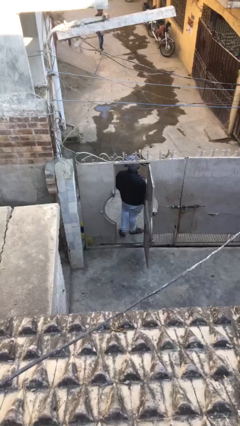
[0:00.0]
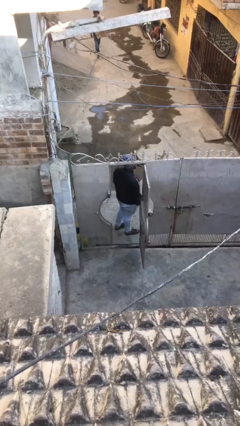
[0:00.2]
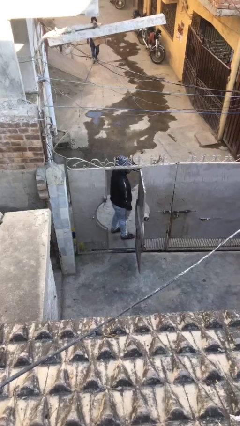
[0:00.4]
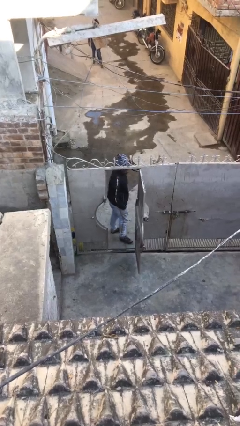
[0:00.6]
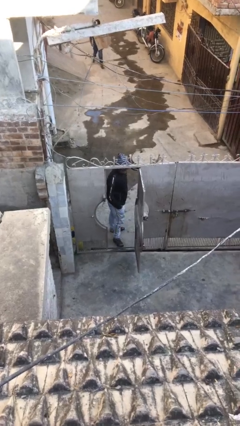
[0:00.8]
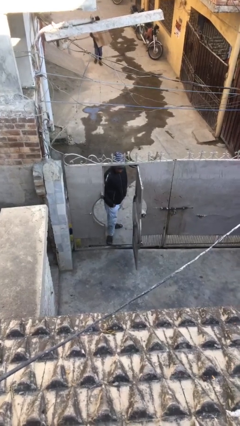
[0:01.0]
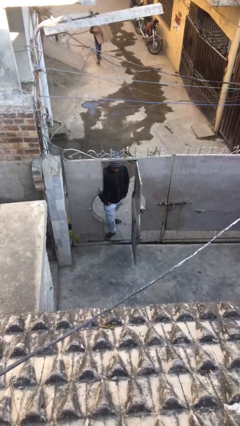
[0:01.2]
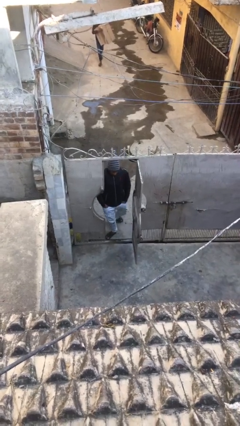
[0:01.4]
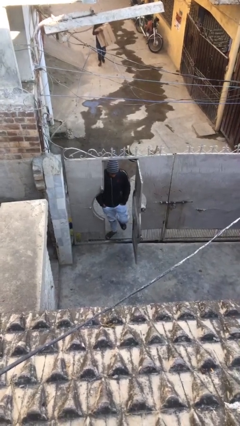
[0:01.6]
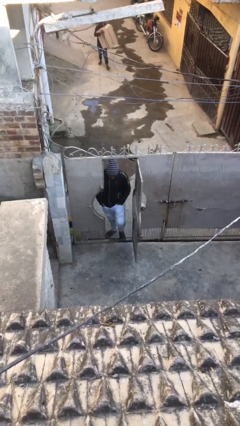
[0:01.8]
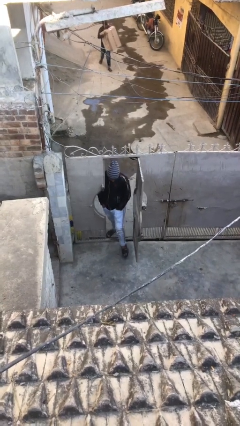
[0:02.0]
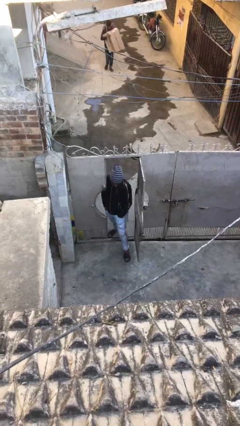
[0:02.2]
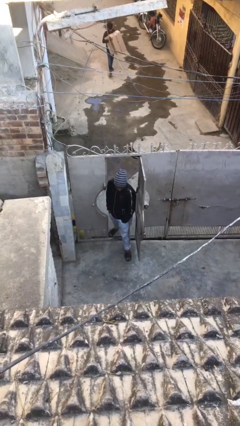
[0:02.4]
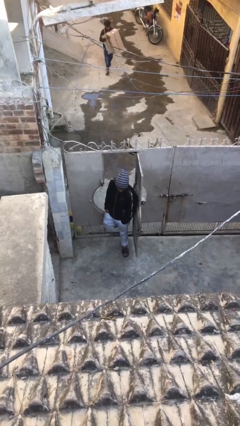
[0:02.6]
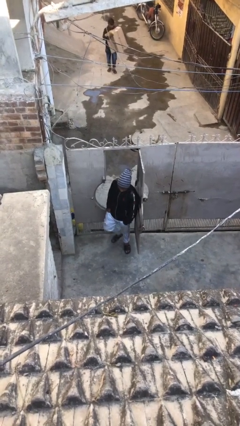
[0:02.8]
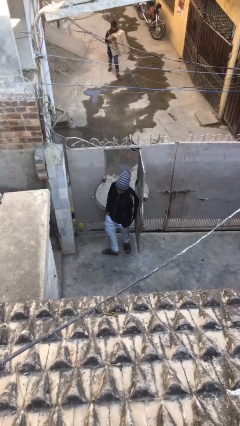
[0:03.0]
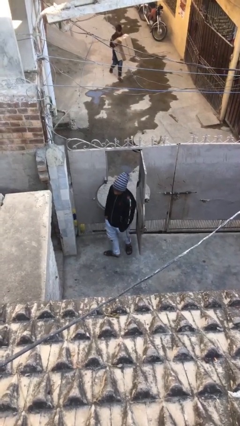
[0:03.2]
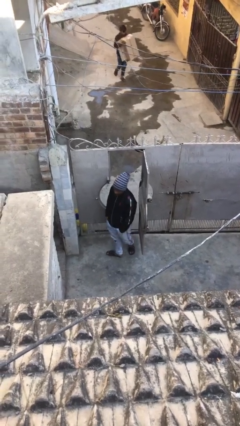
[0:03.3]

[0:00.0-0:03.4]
person enters scene through structure

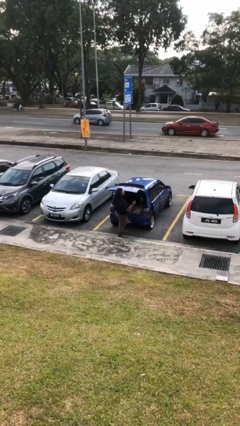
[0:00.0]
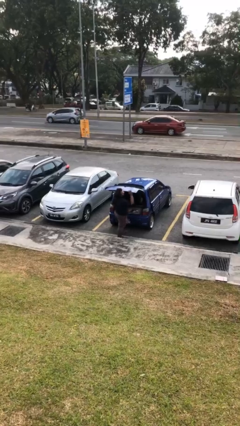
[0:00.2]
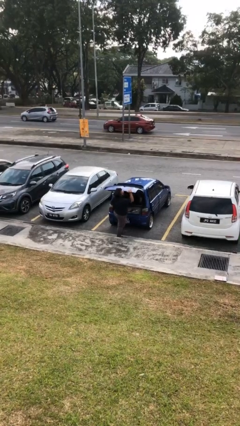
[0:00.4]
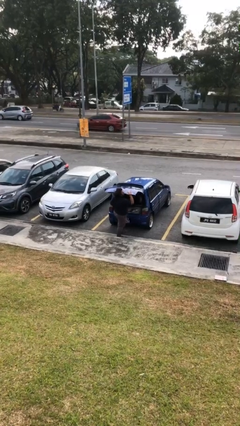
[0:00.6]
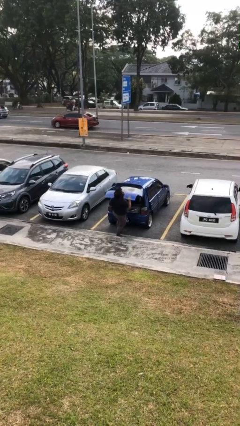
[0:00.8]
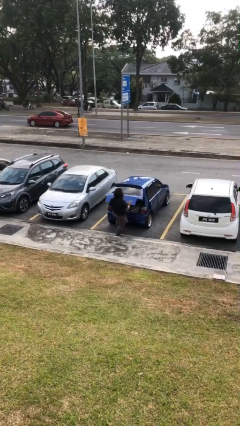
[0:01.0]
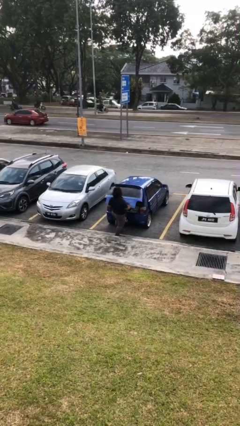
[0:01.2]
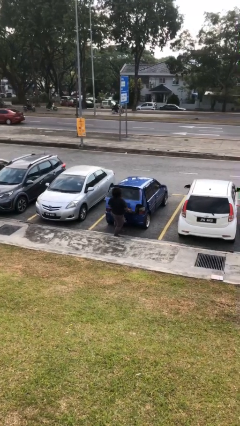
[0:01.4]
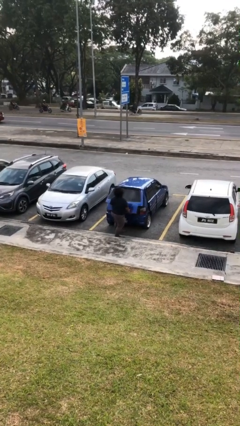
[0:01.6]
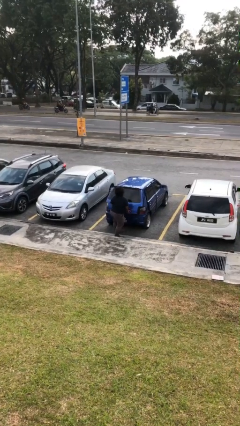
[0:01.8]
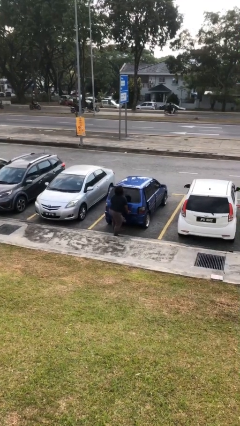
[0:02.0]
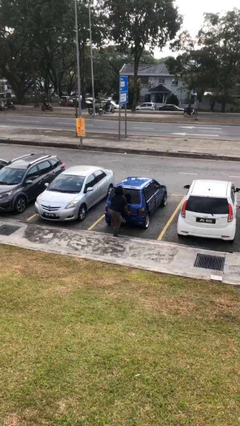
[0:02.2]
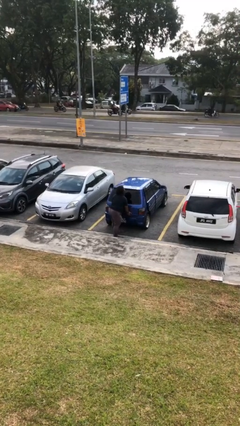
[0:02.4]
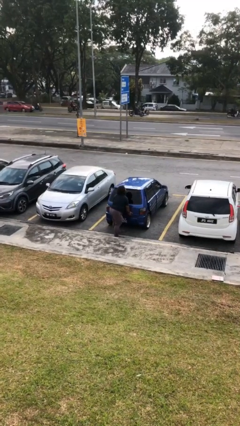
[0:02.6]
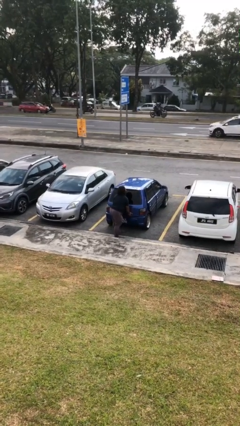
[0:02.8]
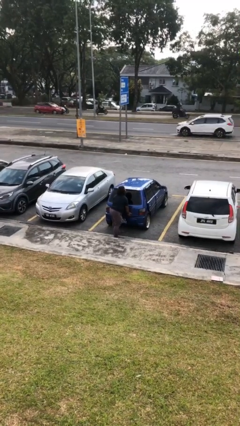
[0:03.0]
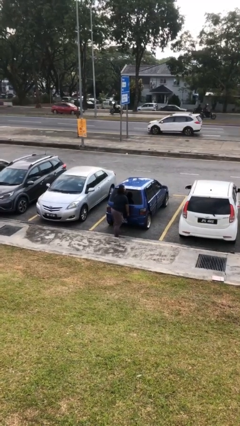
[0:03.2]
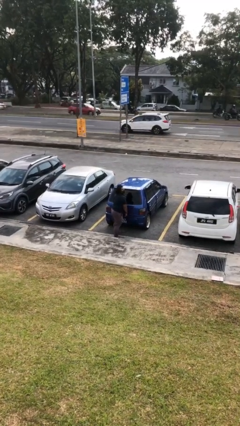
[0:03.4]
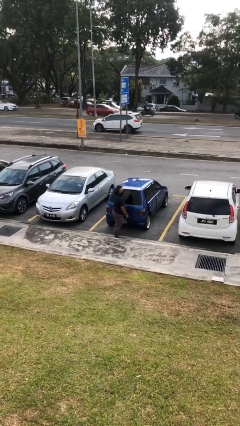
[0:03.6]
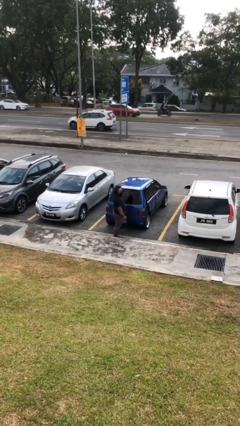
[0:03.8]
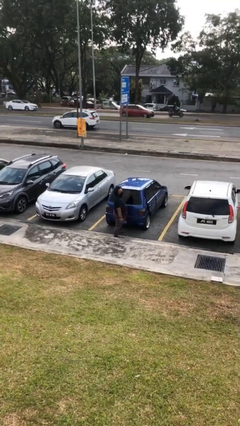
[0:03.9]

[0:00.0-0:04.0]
person closes car trunk

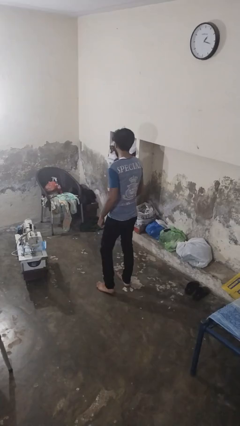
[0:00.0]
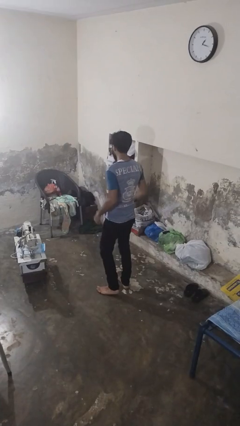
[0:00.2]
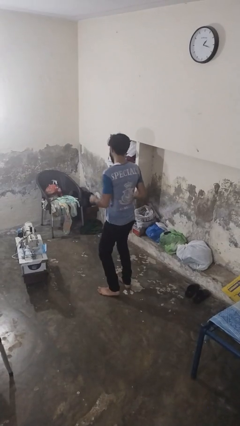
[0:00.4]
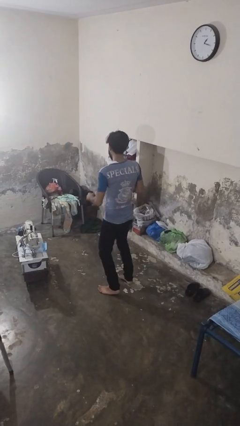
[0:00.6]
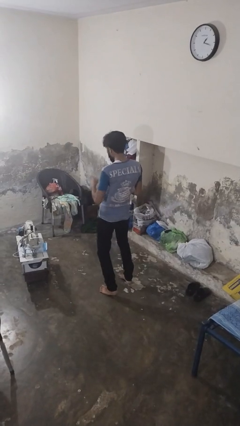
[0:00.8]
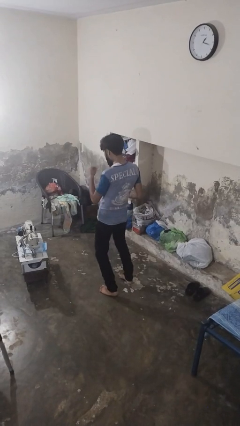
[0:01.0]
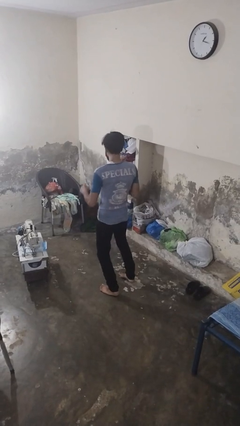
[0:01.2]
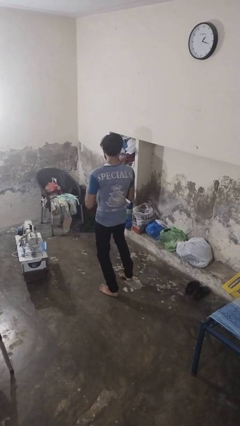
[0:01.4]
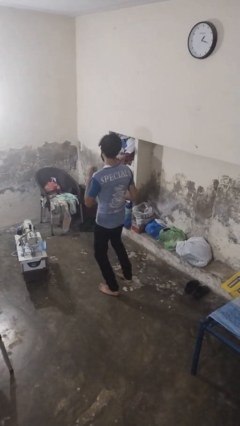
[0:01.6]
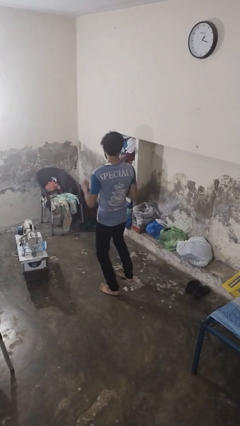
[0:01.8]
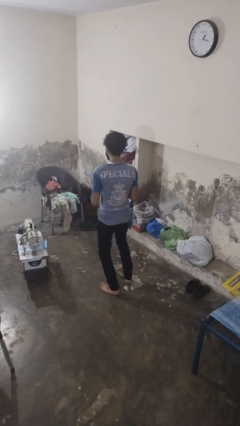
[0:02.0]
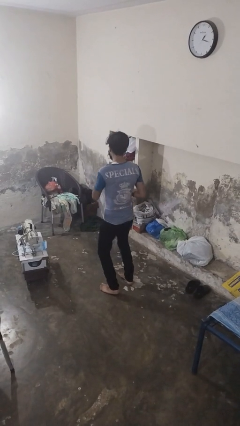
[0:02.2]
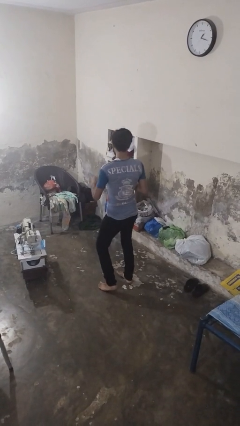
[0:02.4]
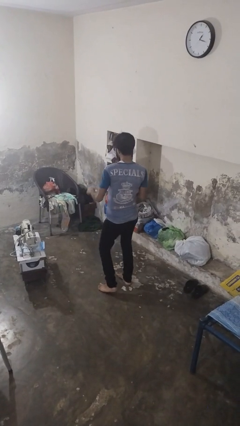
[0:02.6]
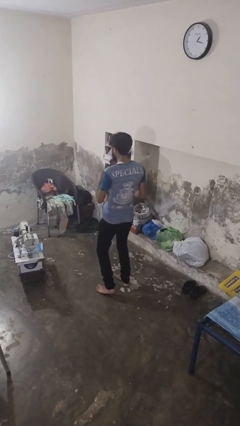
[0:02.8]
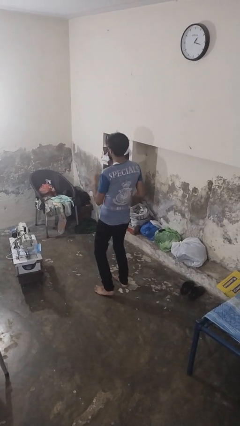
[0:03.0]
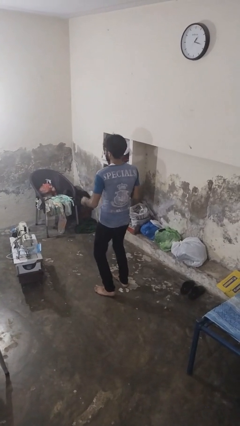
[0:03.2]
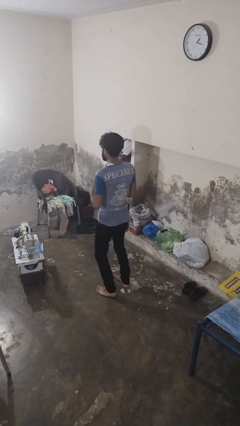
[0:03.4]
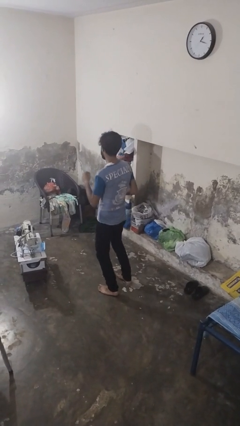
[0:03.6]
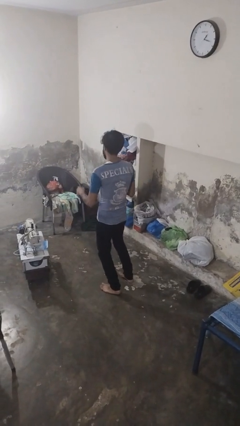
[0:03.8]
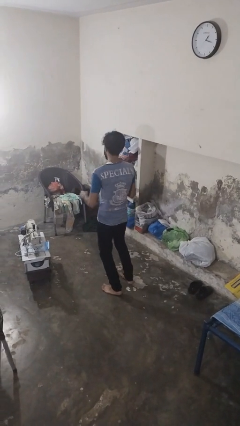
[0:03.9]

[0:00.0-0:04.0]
person dances in place

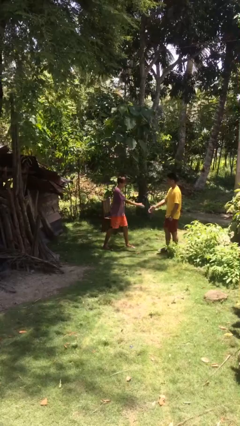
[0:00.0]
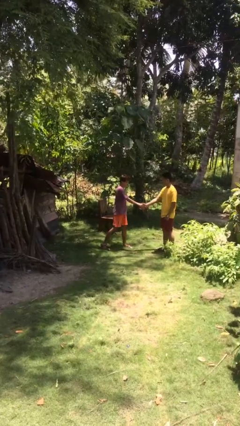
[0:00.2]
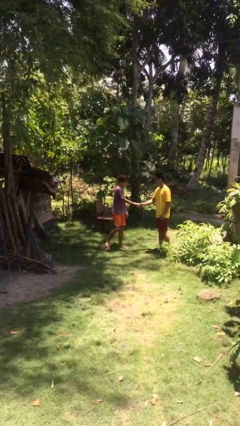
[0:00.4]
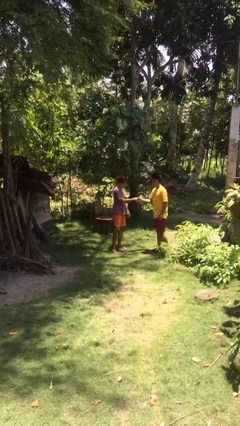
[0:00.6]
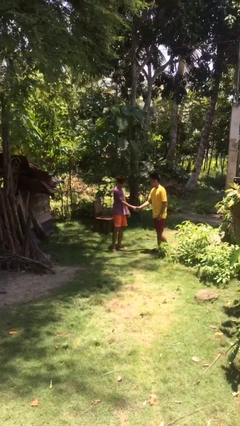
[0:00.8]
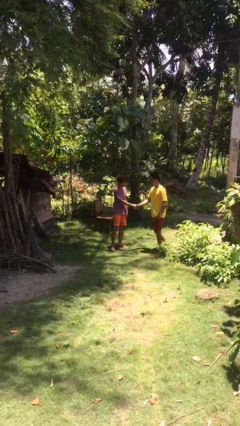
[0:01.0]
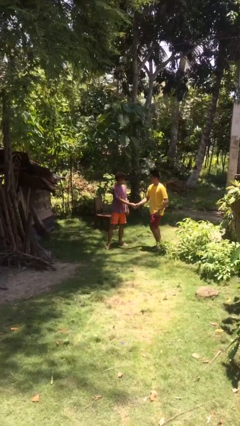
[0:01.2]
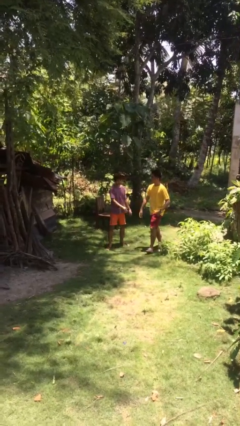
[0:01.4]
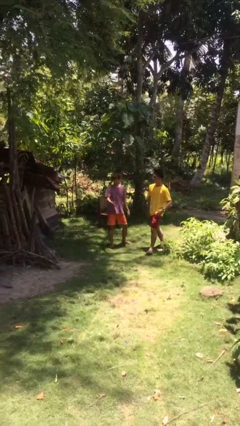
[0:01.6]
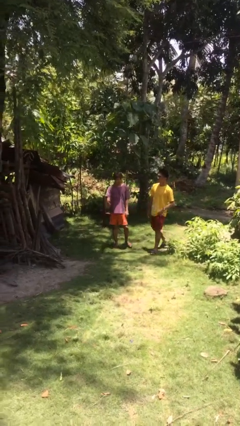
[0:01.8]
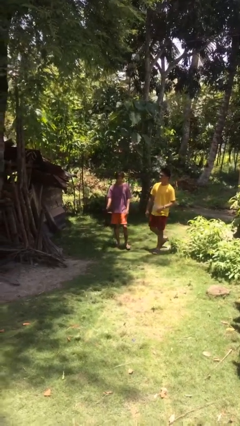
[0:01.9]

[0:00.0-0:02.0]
person shakes hand

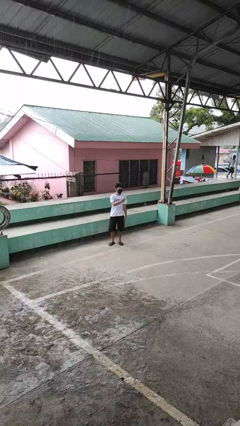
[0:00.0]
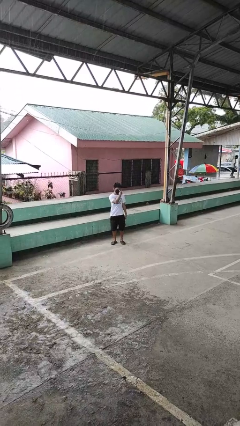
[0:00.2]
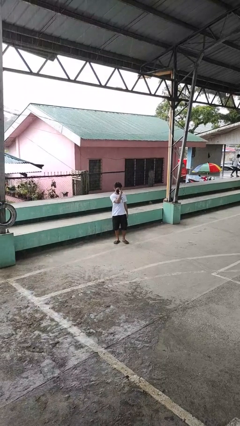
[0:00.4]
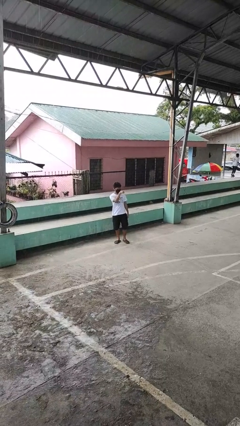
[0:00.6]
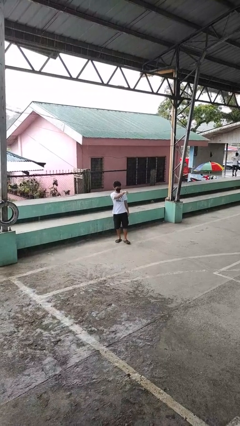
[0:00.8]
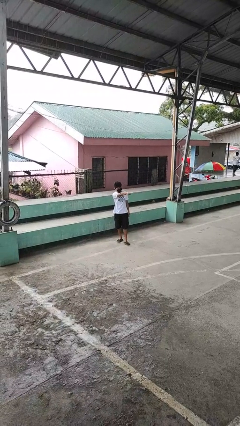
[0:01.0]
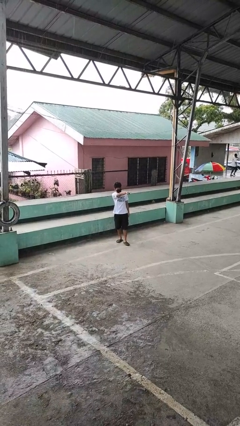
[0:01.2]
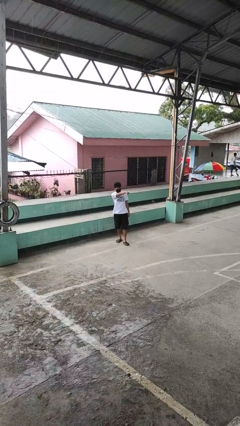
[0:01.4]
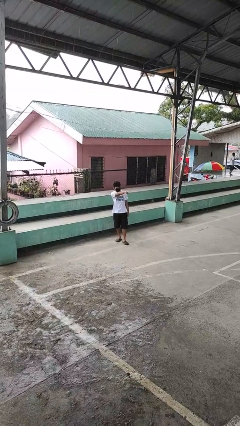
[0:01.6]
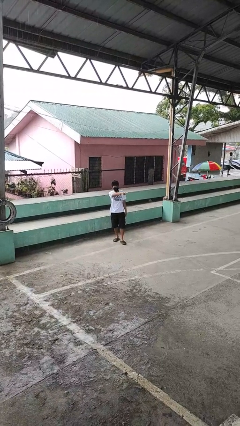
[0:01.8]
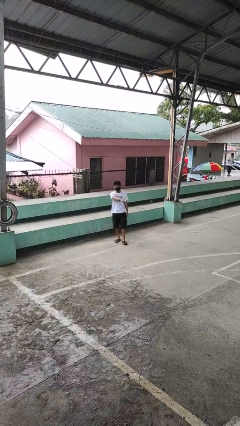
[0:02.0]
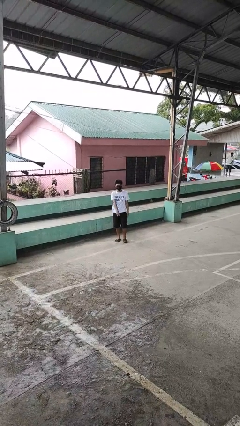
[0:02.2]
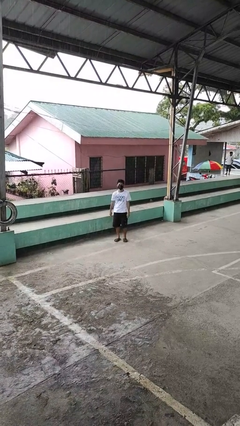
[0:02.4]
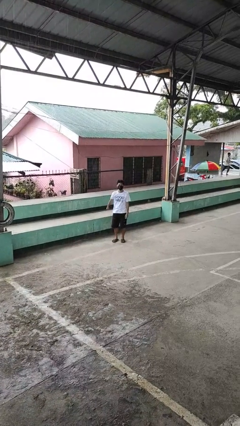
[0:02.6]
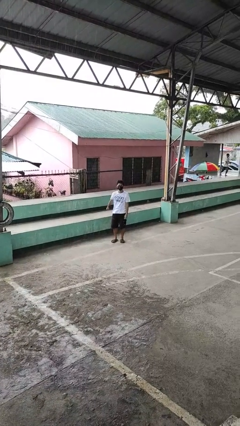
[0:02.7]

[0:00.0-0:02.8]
person gestures watch closely

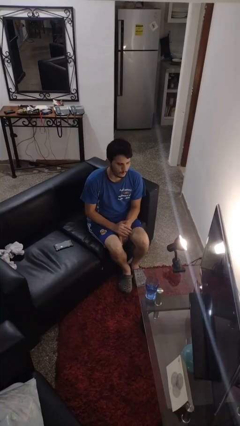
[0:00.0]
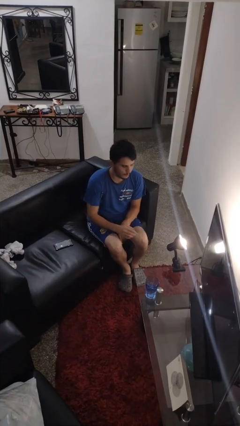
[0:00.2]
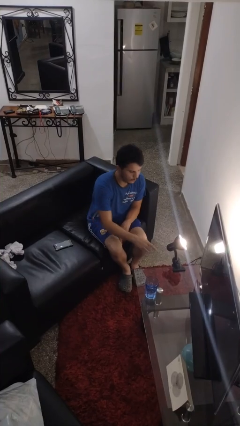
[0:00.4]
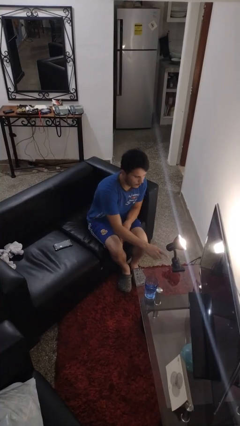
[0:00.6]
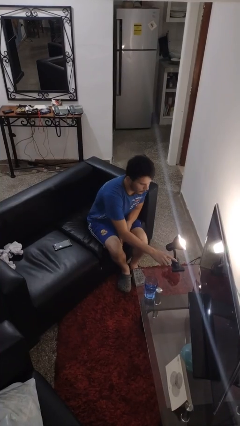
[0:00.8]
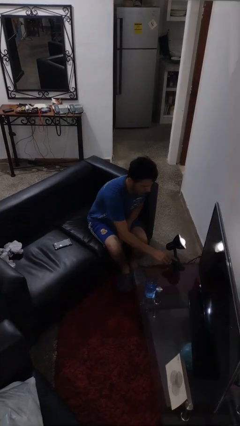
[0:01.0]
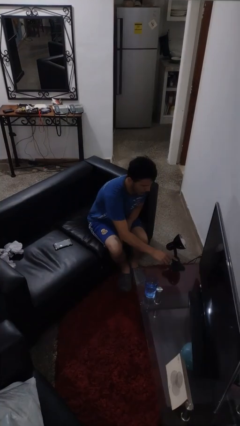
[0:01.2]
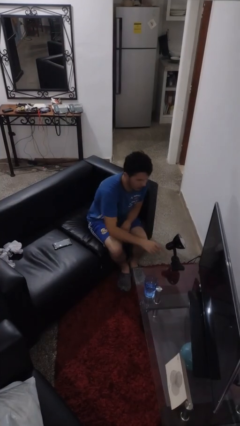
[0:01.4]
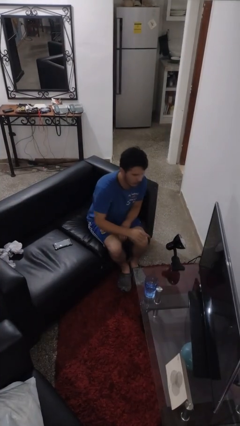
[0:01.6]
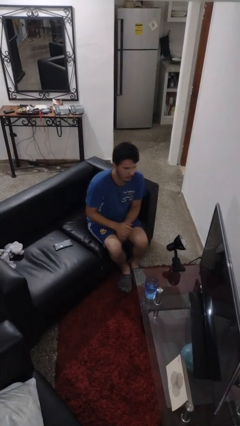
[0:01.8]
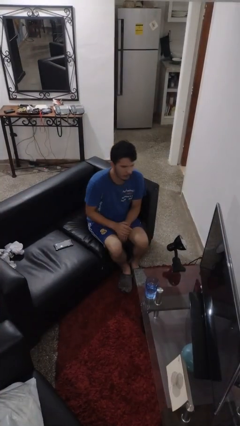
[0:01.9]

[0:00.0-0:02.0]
person turns off lamp
